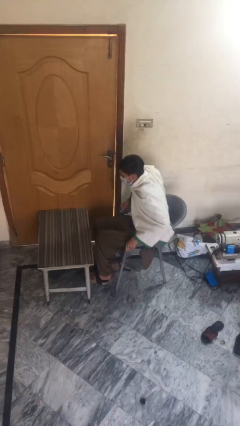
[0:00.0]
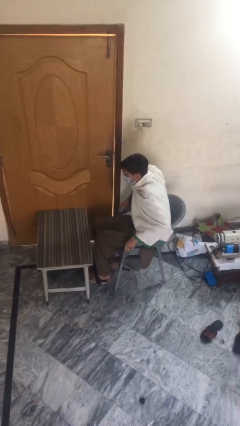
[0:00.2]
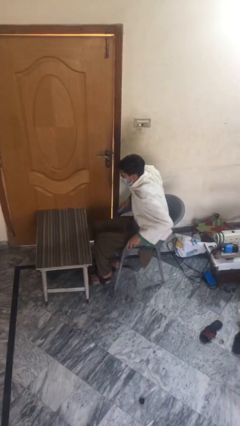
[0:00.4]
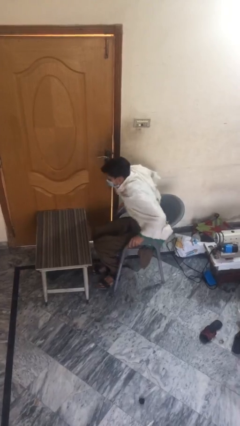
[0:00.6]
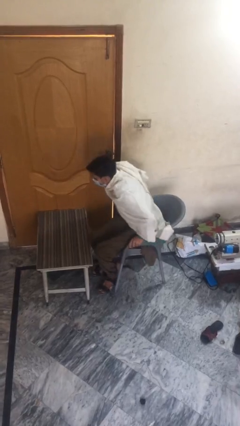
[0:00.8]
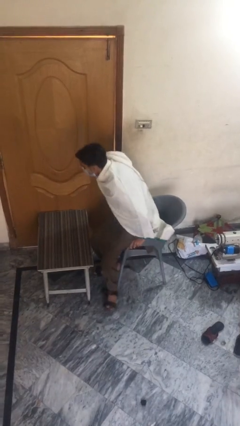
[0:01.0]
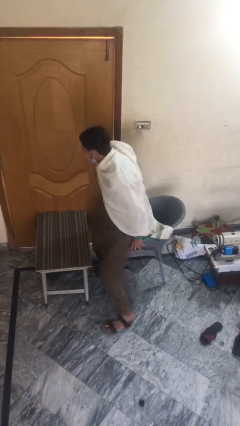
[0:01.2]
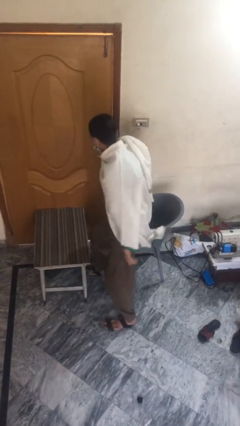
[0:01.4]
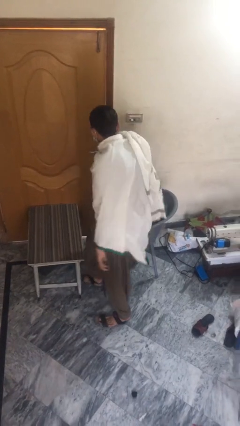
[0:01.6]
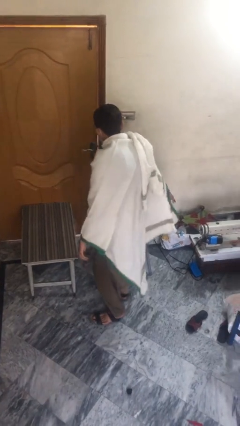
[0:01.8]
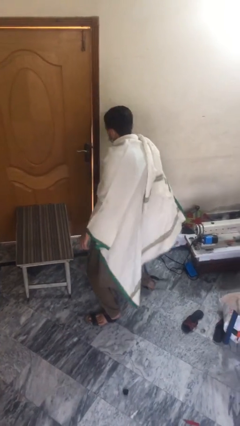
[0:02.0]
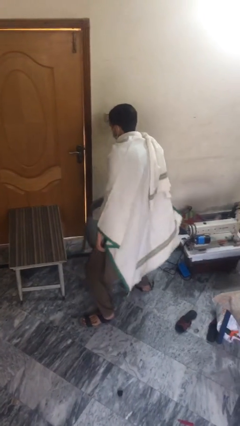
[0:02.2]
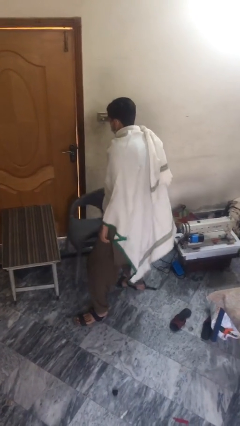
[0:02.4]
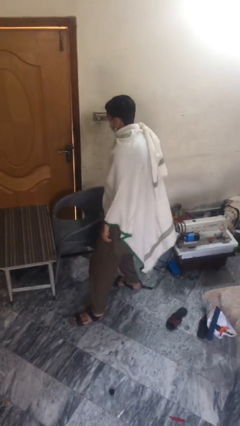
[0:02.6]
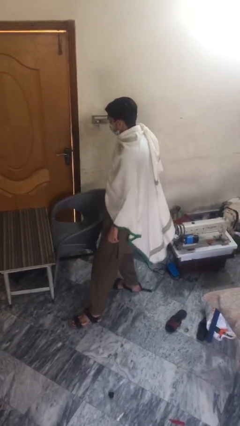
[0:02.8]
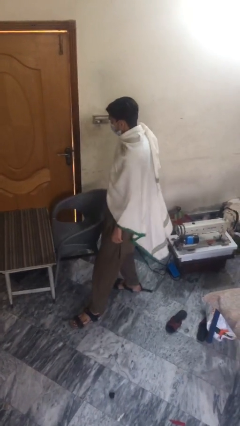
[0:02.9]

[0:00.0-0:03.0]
person stands up

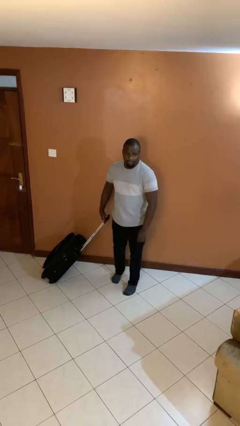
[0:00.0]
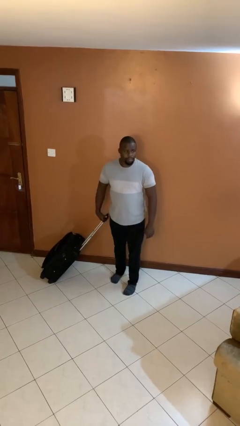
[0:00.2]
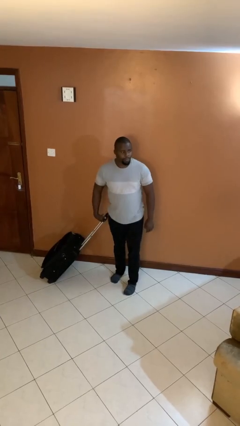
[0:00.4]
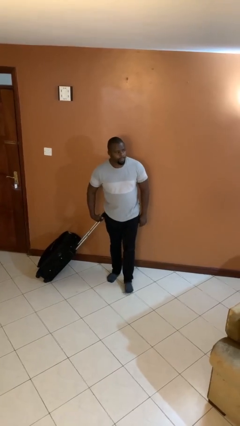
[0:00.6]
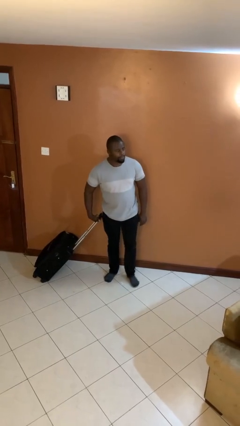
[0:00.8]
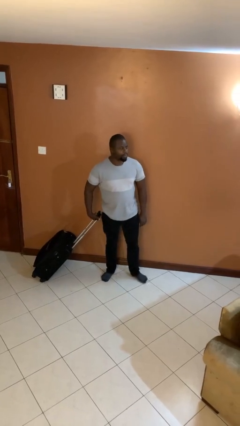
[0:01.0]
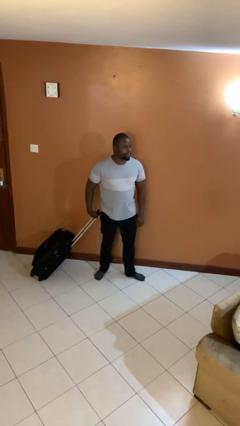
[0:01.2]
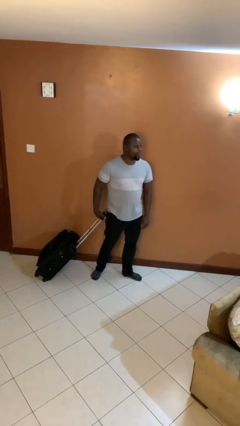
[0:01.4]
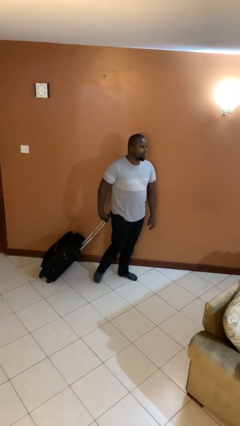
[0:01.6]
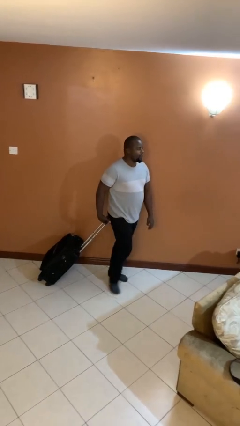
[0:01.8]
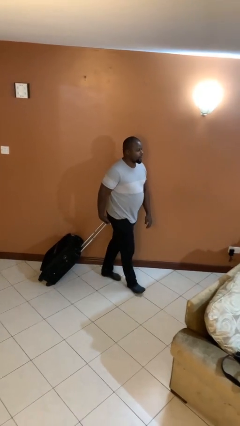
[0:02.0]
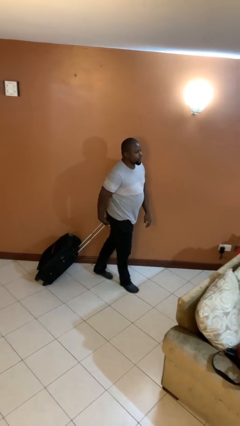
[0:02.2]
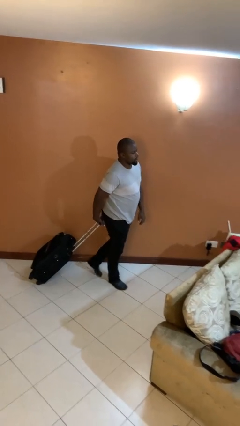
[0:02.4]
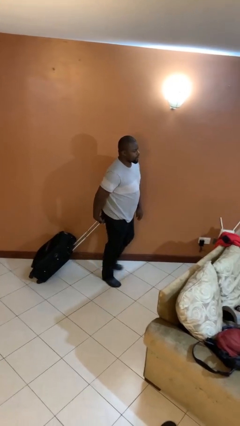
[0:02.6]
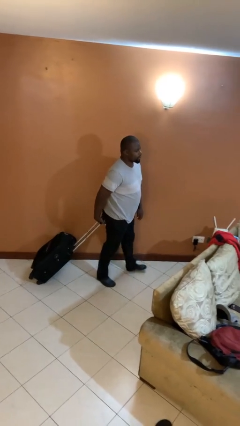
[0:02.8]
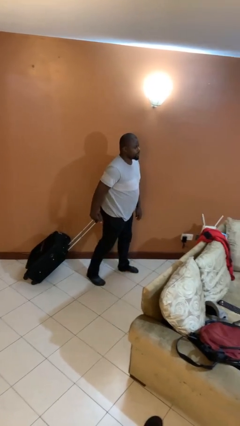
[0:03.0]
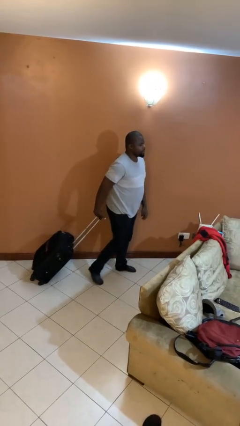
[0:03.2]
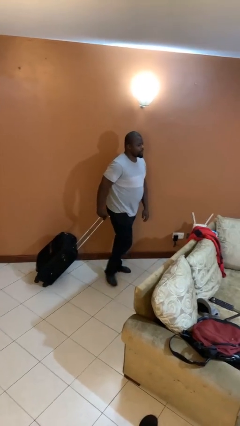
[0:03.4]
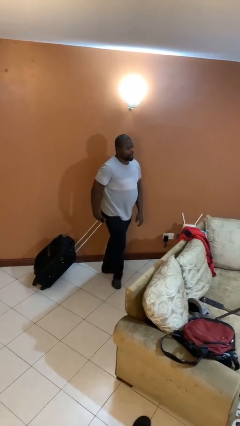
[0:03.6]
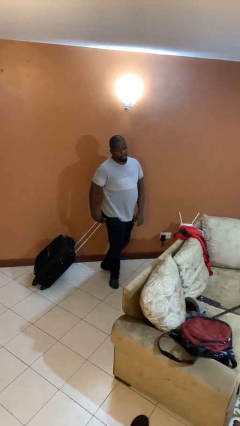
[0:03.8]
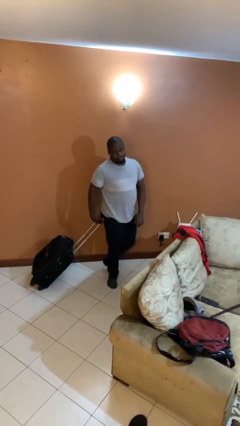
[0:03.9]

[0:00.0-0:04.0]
person pulls wheeled cart

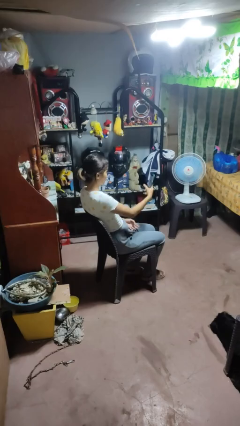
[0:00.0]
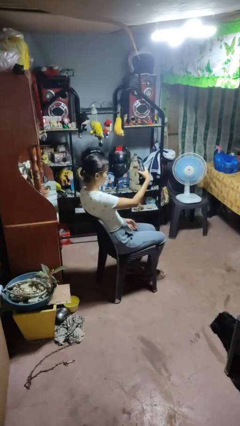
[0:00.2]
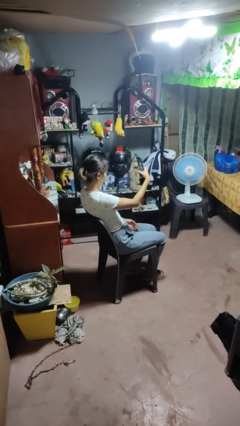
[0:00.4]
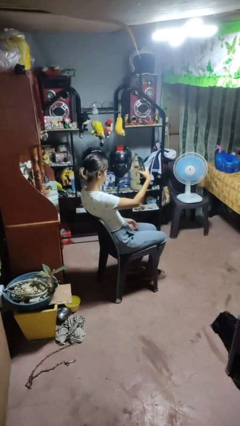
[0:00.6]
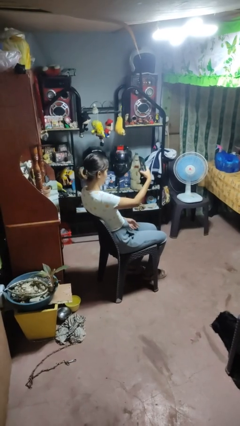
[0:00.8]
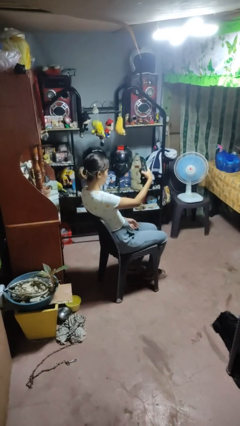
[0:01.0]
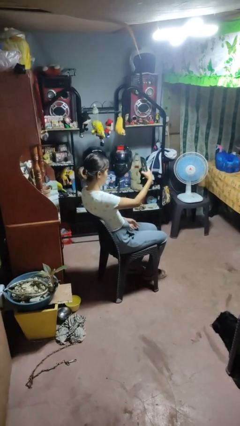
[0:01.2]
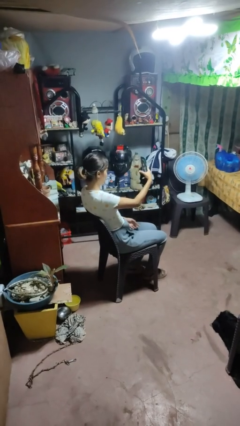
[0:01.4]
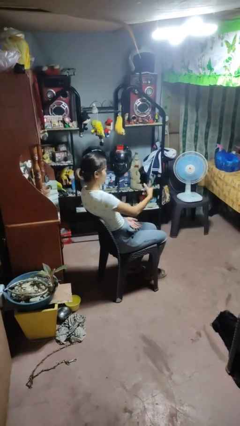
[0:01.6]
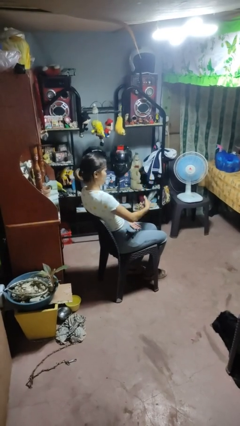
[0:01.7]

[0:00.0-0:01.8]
person takes selfie

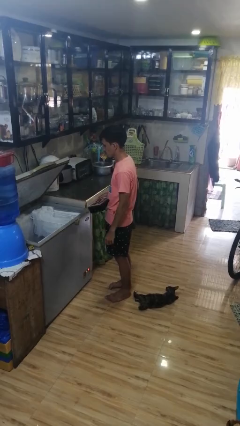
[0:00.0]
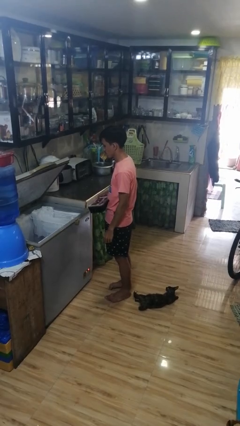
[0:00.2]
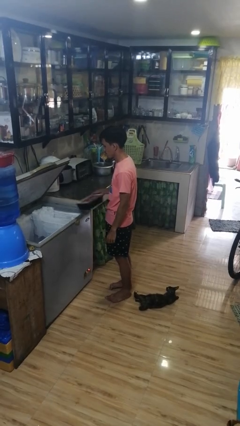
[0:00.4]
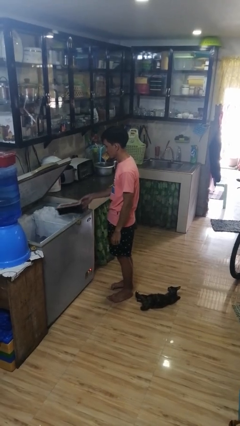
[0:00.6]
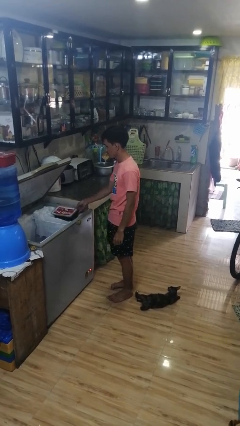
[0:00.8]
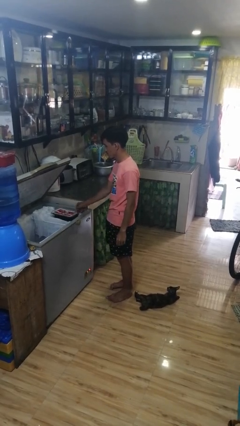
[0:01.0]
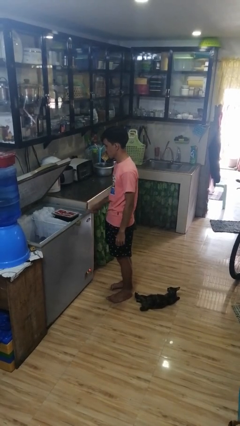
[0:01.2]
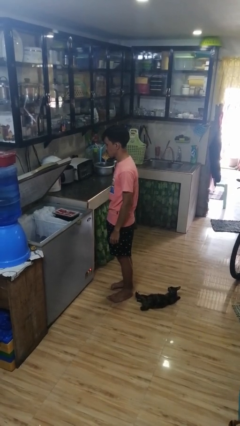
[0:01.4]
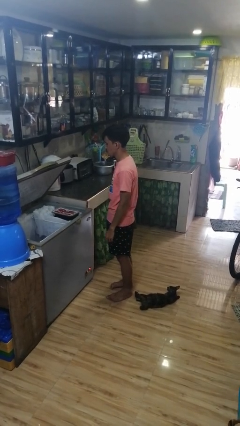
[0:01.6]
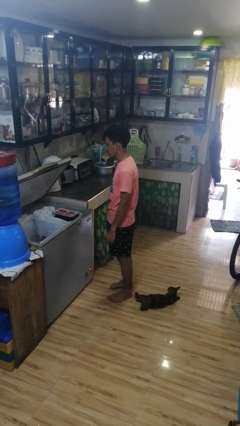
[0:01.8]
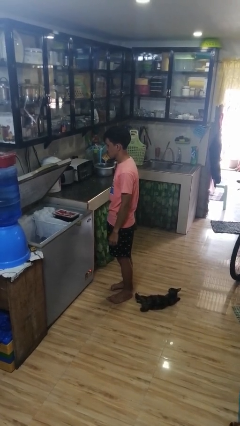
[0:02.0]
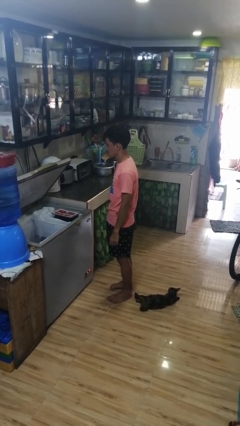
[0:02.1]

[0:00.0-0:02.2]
person puts object into refrigerator

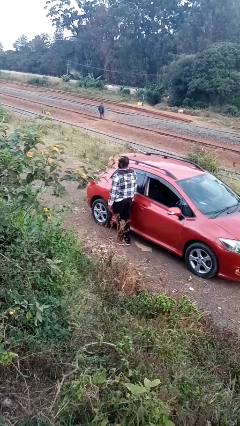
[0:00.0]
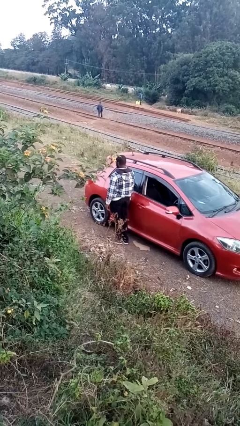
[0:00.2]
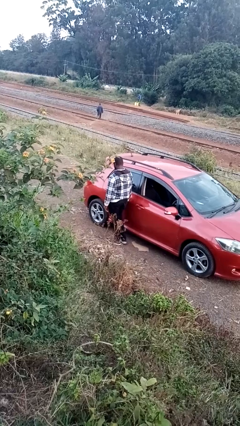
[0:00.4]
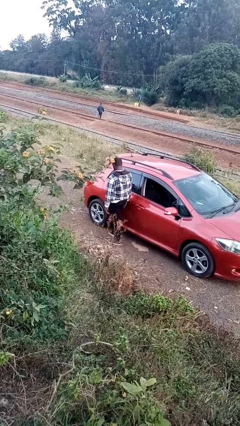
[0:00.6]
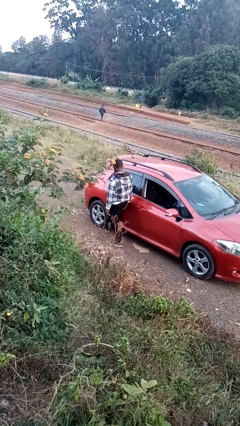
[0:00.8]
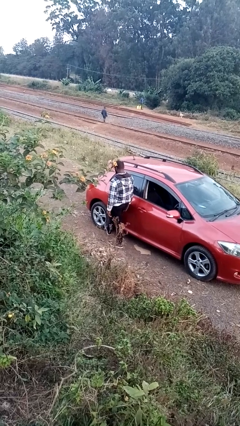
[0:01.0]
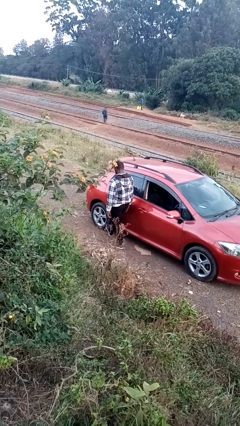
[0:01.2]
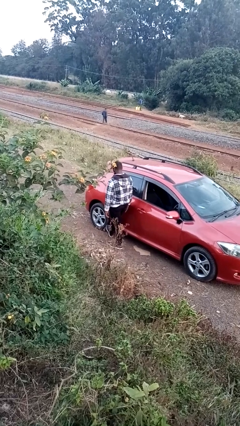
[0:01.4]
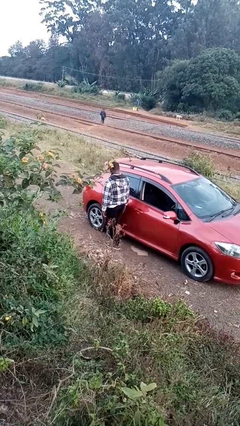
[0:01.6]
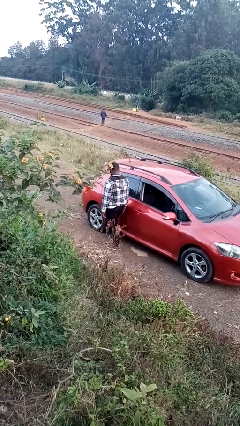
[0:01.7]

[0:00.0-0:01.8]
person kicks car tires

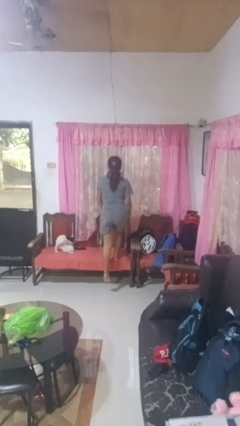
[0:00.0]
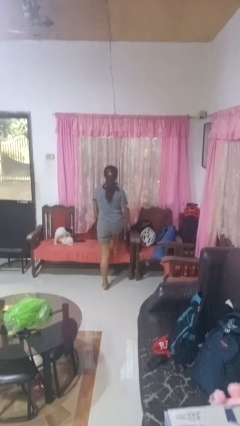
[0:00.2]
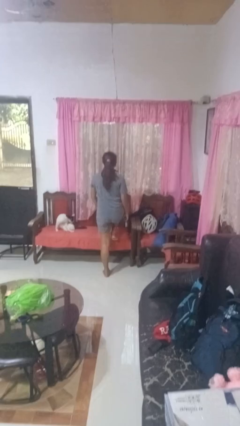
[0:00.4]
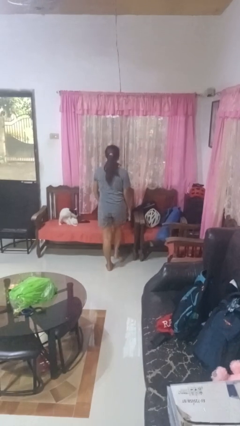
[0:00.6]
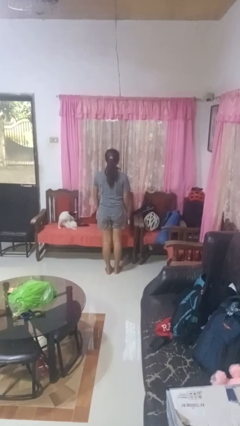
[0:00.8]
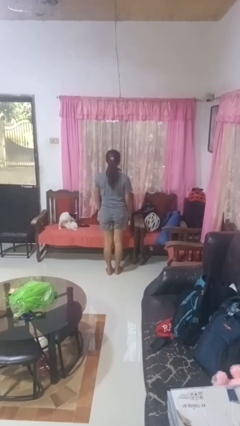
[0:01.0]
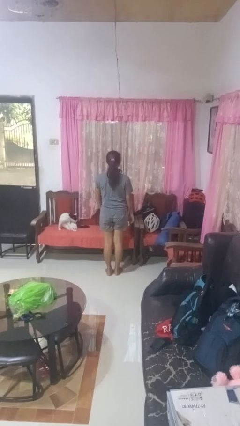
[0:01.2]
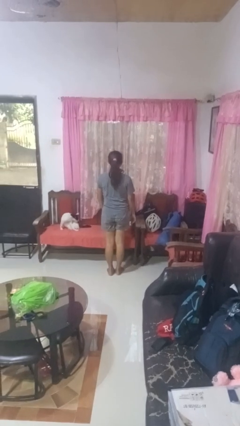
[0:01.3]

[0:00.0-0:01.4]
person climbs off chair

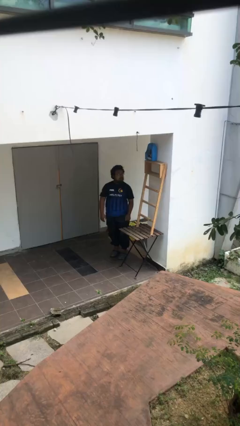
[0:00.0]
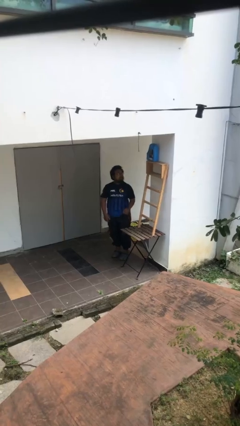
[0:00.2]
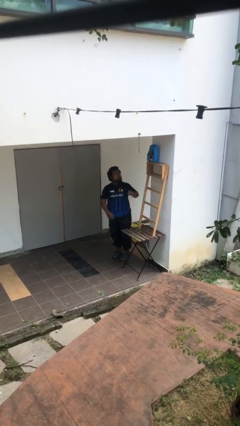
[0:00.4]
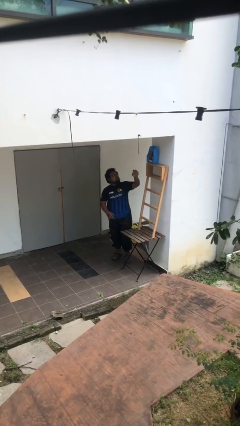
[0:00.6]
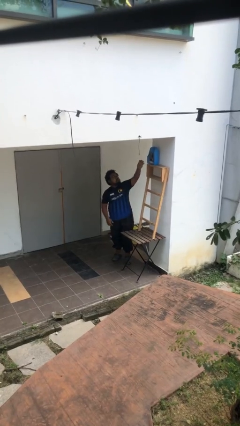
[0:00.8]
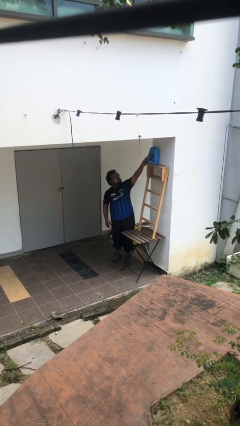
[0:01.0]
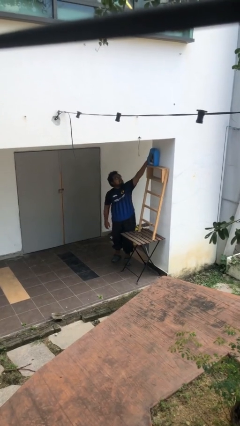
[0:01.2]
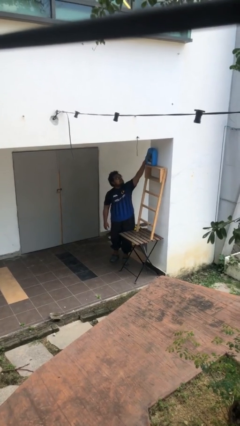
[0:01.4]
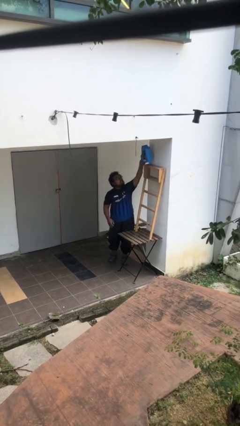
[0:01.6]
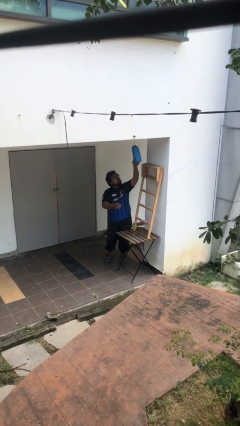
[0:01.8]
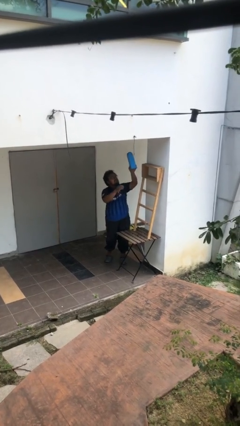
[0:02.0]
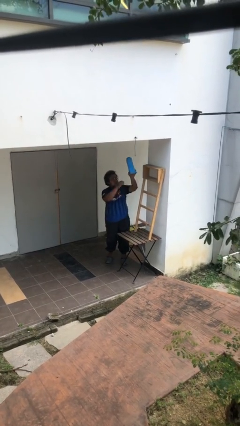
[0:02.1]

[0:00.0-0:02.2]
person picks up object from shelf

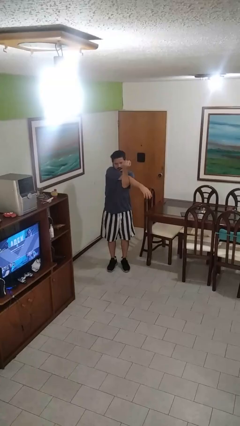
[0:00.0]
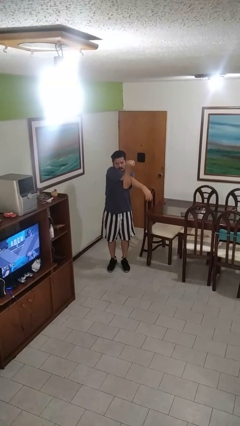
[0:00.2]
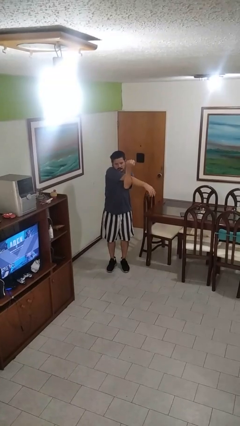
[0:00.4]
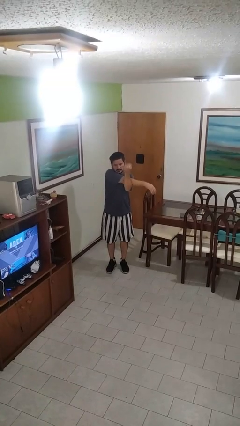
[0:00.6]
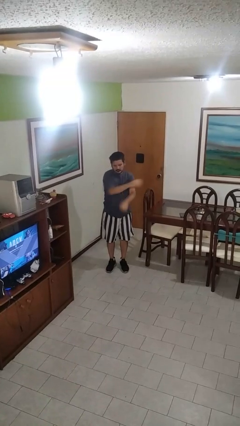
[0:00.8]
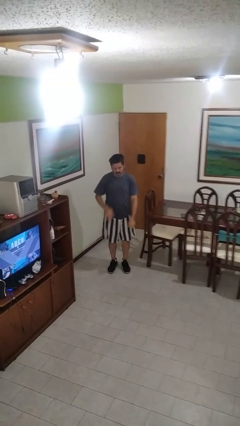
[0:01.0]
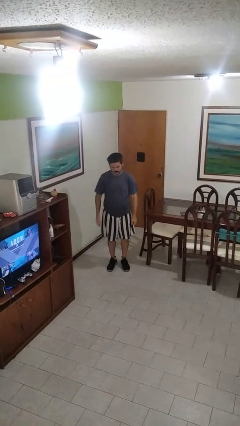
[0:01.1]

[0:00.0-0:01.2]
person stretches arms to side
